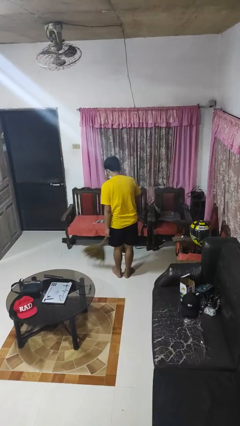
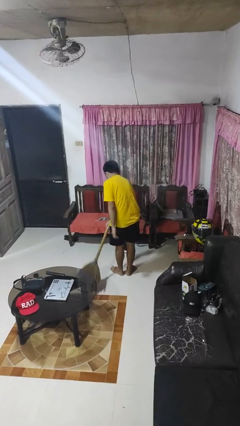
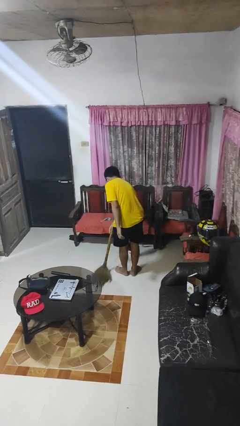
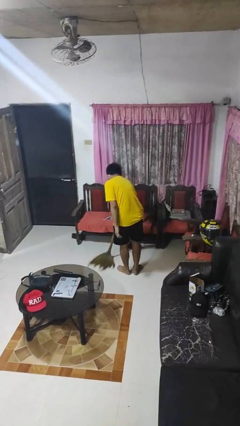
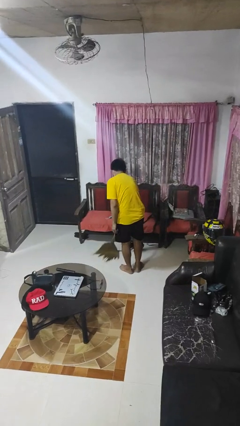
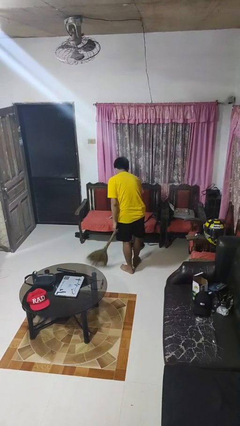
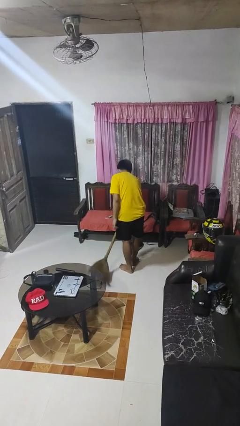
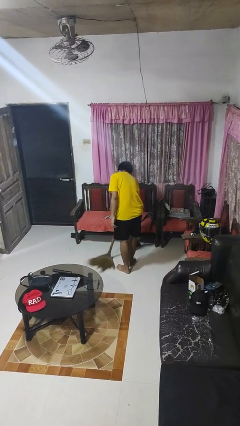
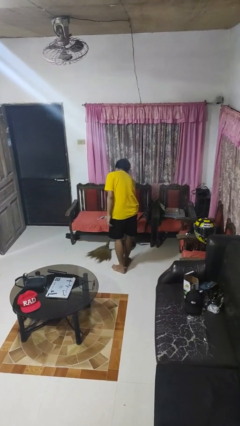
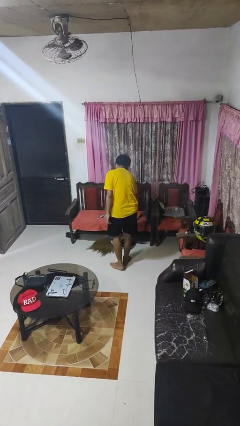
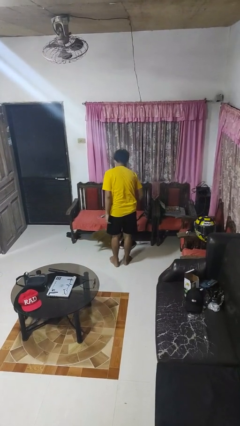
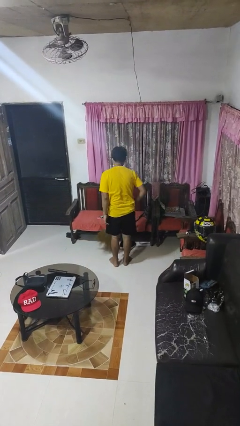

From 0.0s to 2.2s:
person sweeps floor

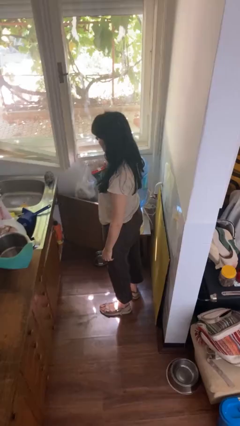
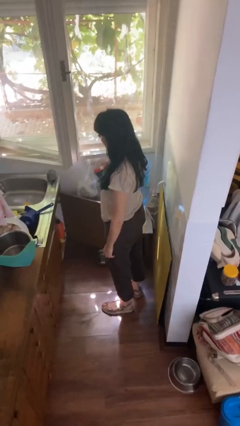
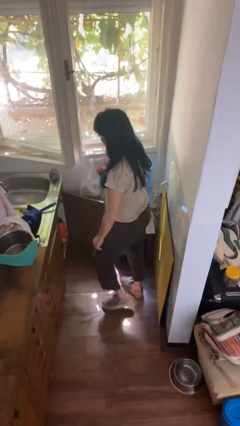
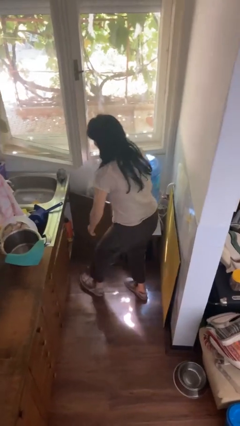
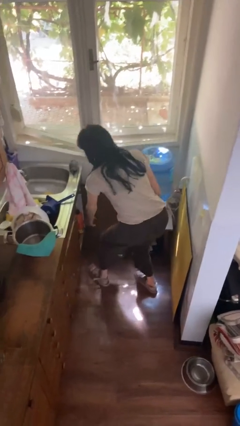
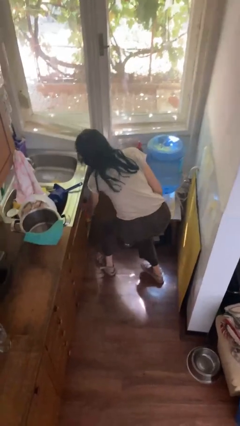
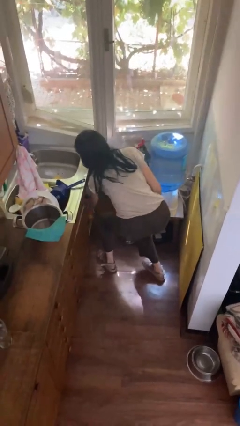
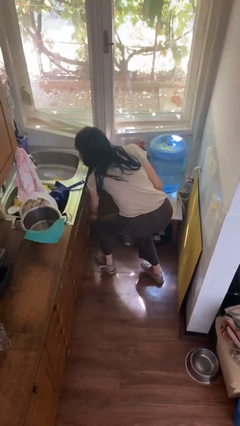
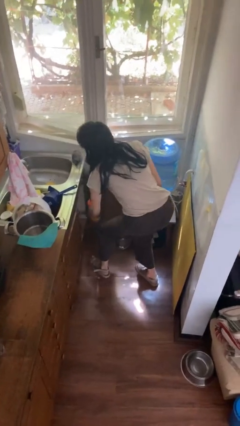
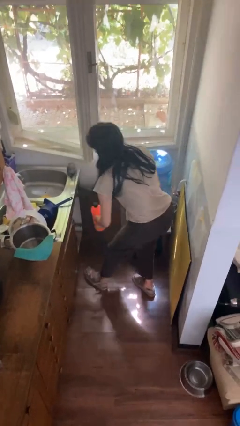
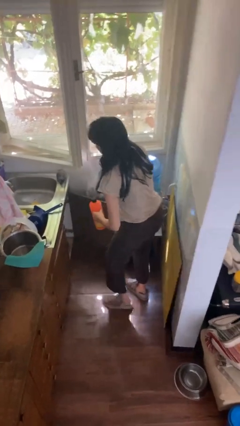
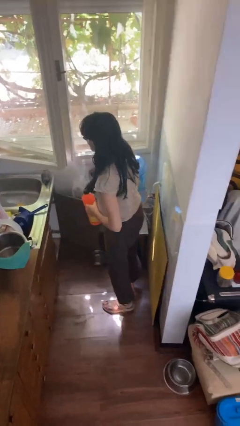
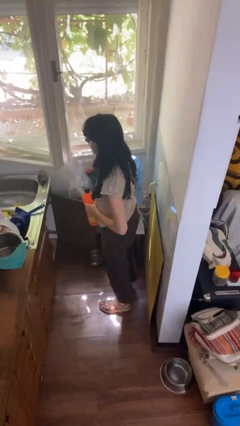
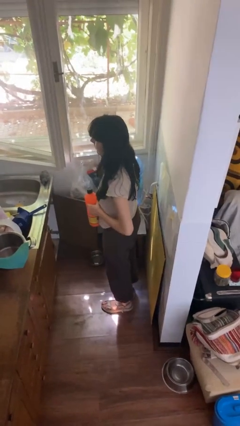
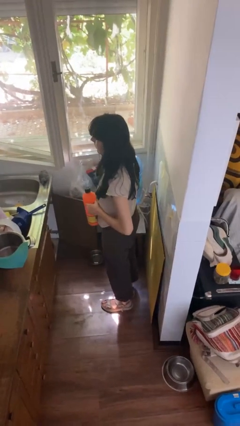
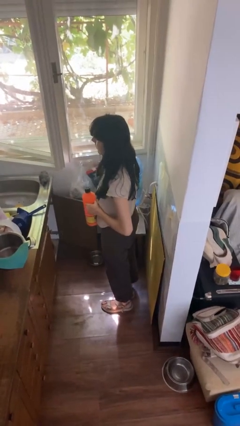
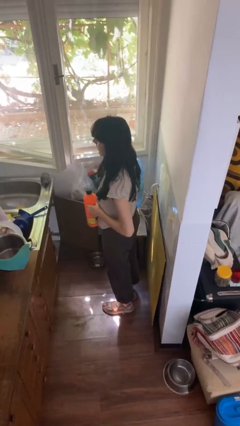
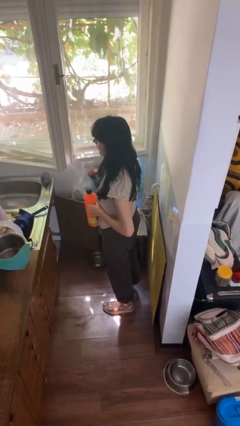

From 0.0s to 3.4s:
person picks up object from cabinet

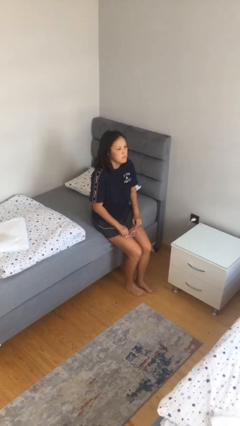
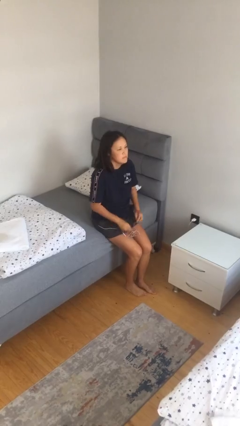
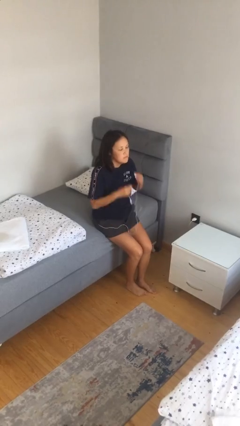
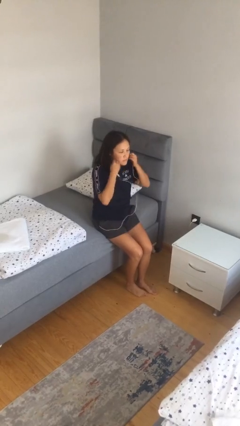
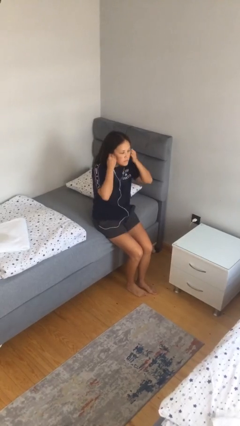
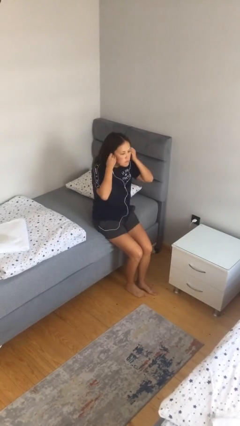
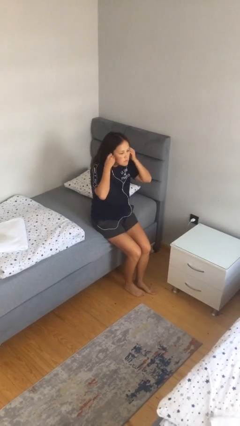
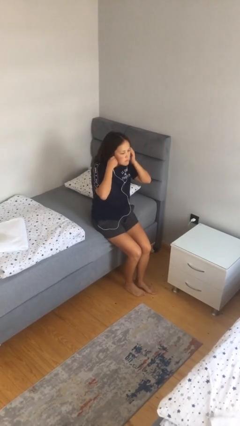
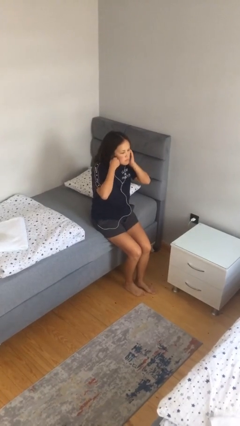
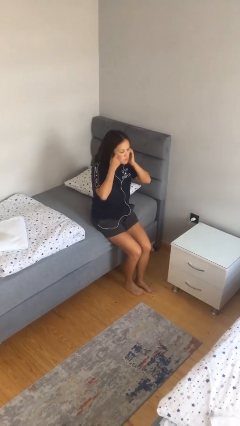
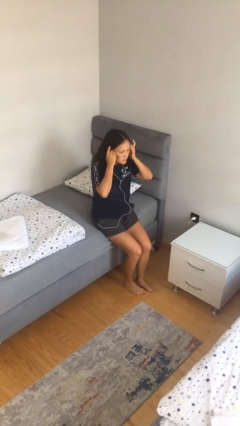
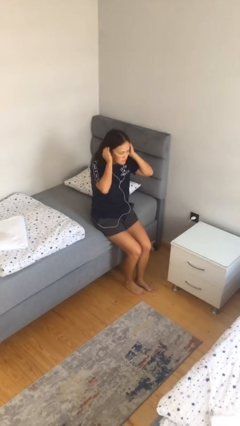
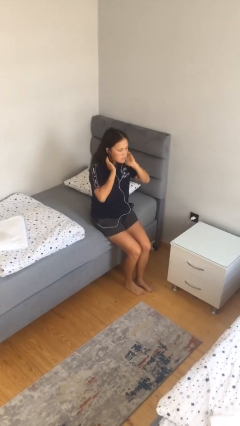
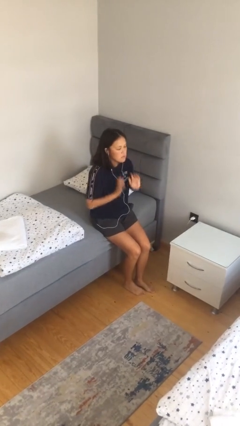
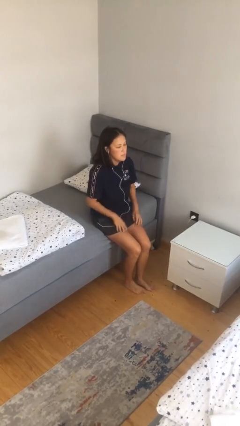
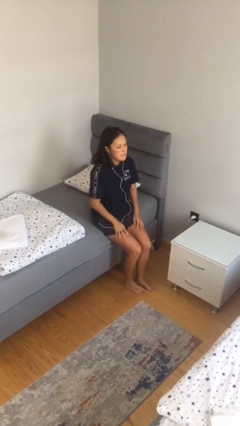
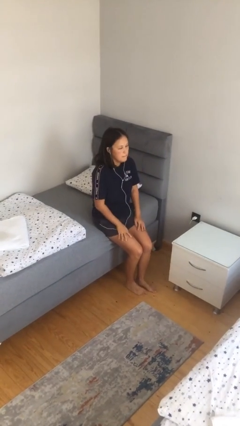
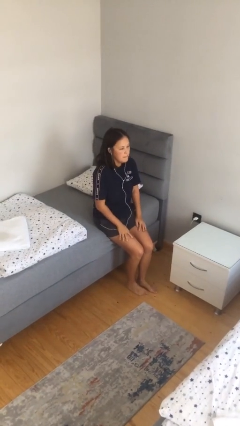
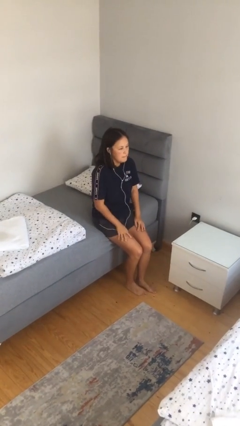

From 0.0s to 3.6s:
person puts on headphones

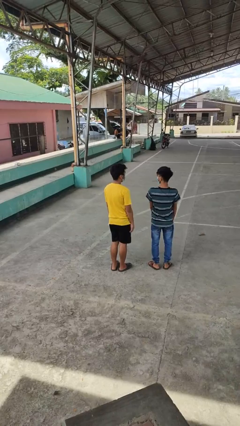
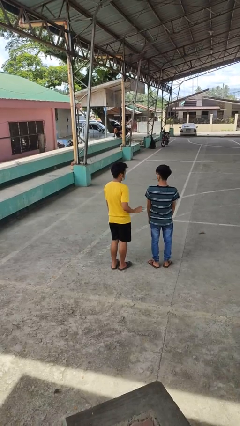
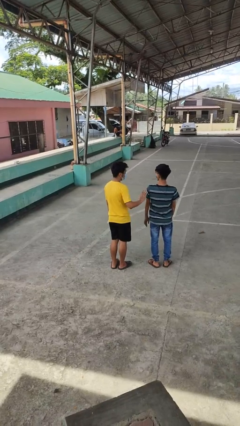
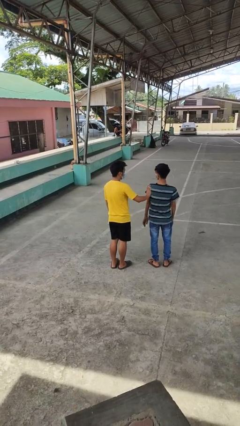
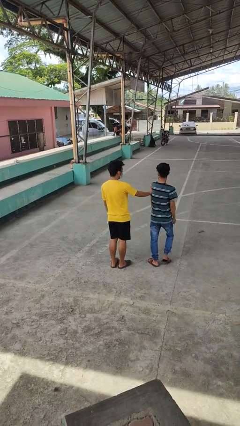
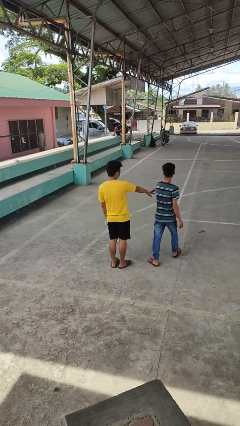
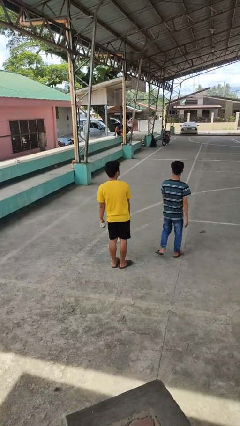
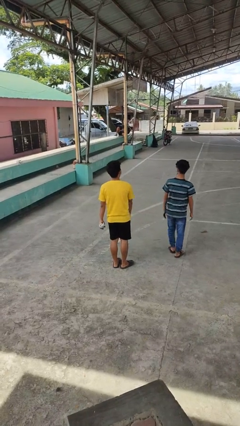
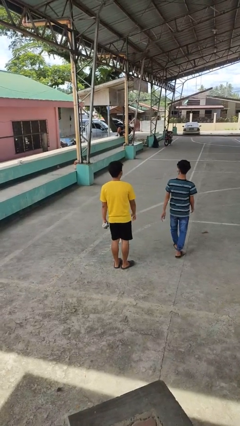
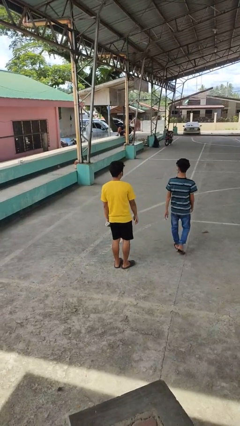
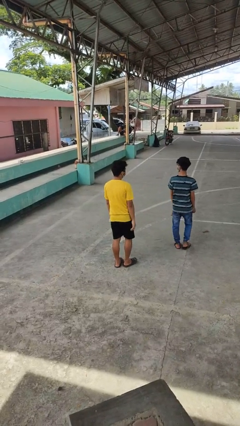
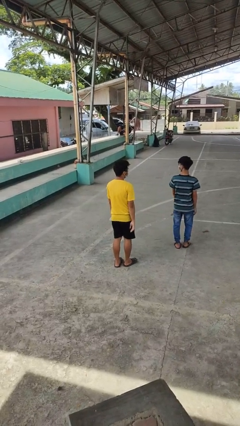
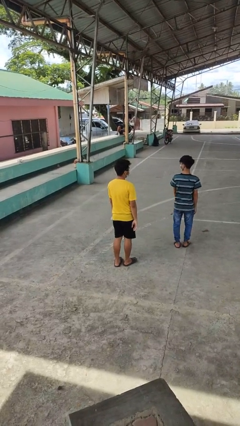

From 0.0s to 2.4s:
person shoves person

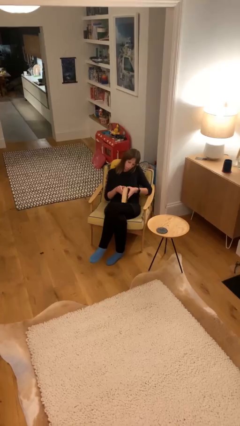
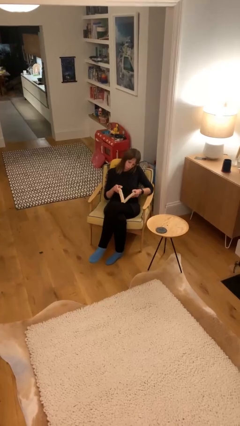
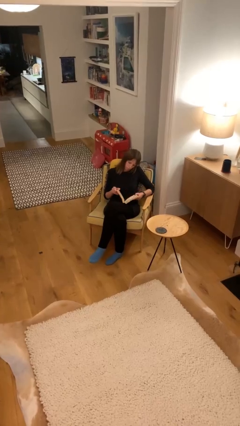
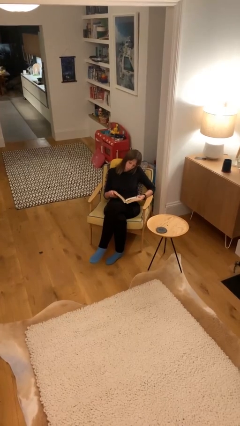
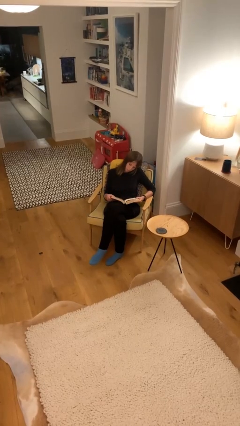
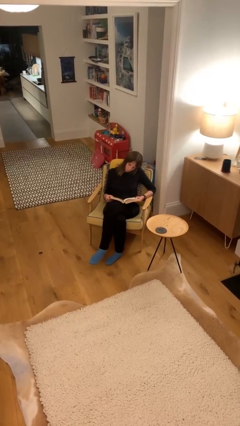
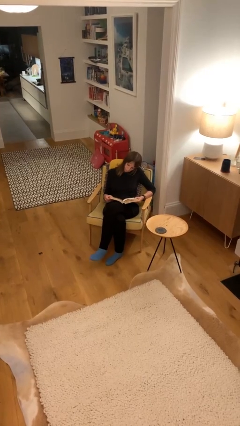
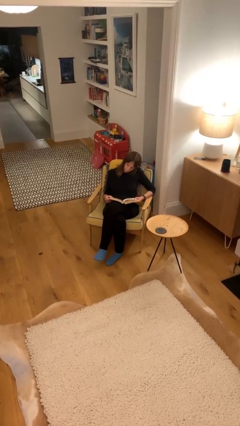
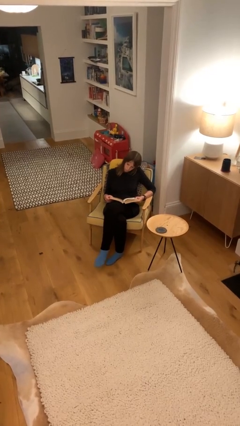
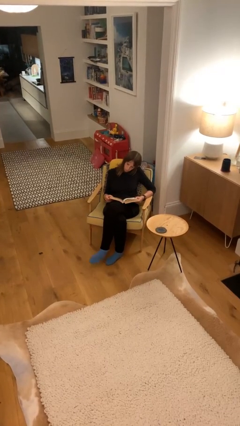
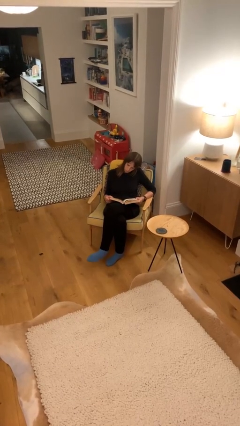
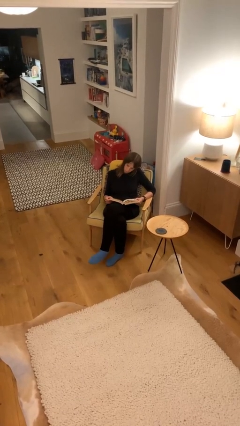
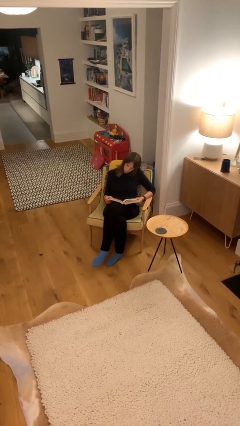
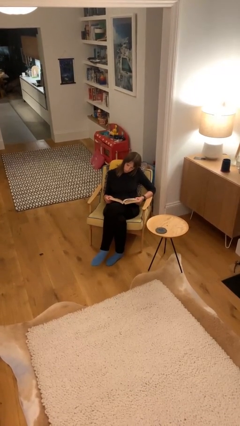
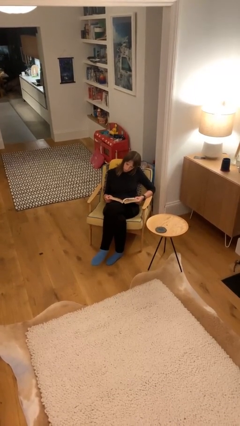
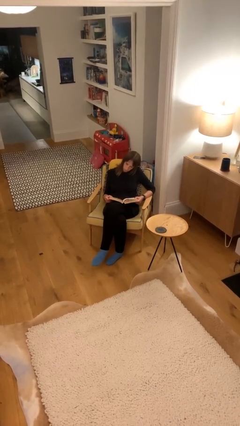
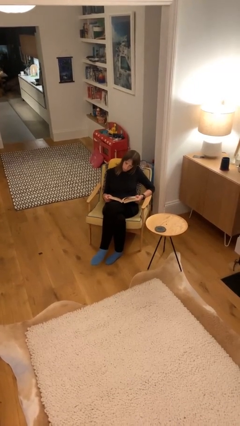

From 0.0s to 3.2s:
person reads document

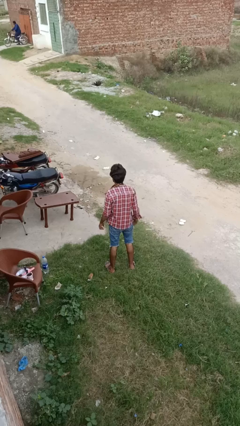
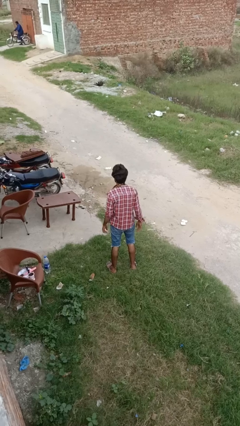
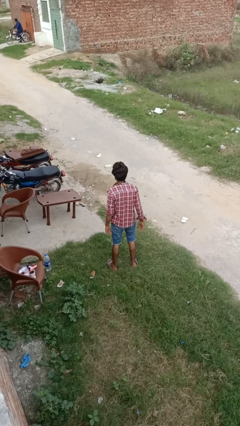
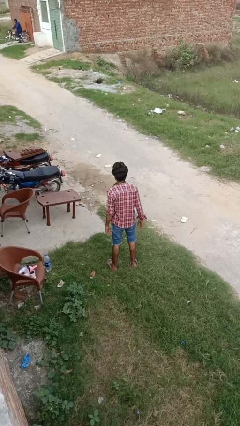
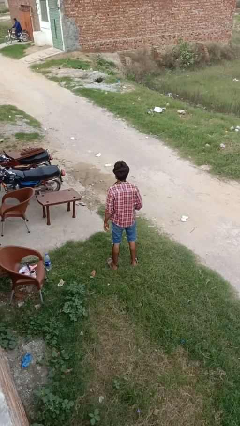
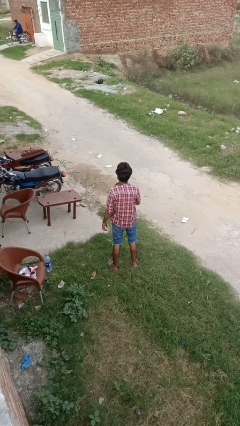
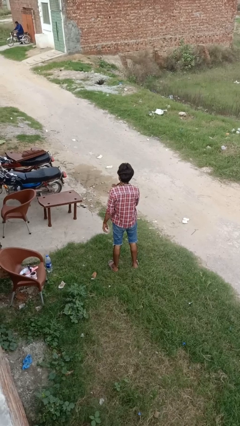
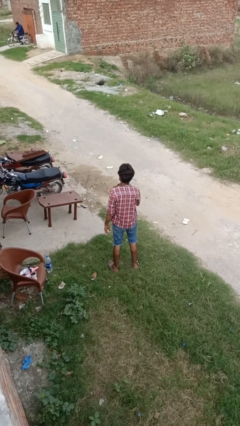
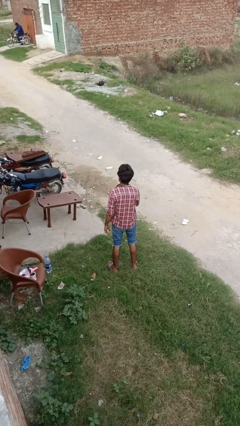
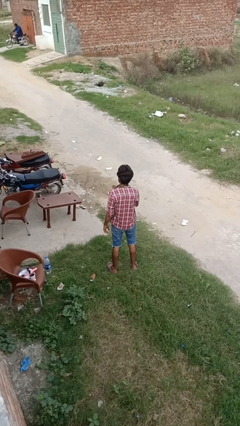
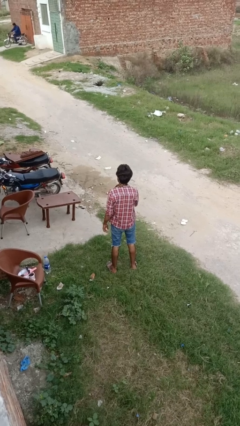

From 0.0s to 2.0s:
person drums on chest

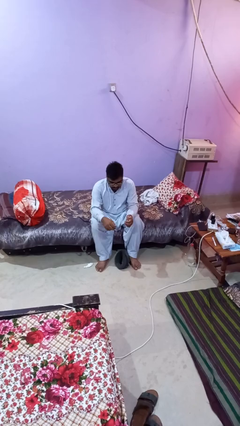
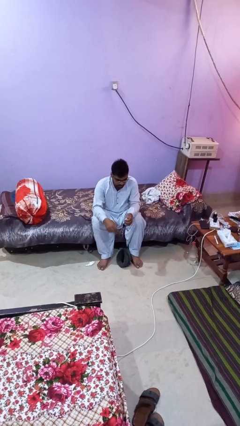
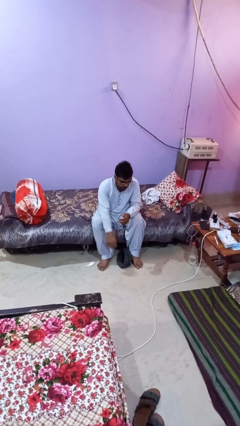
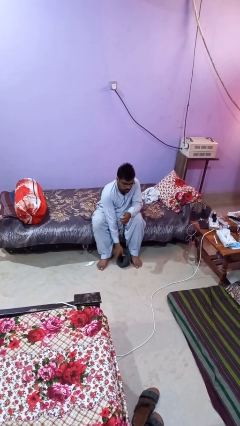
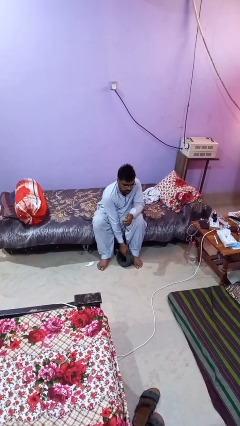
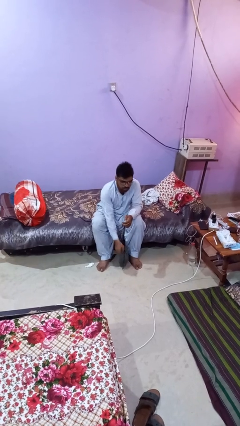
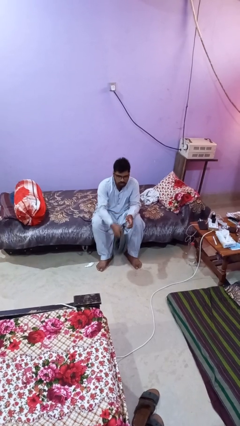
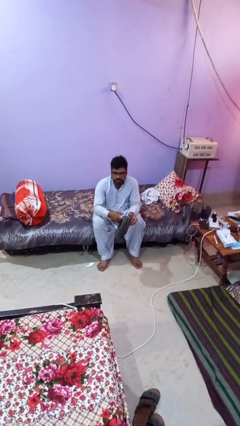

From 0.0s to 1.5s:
person picks up object from floor
